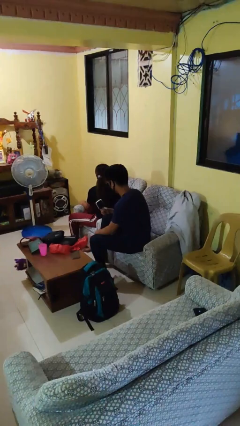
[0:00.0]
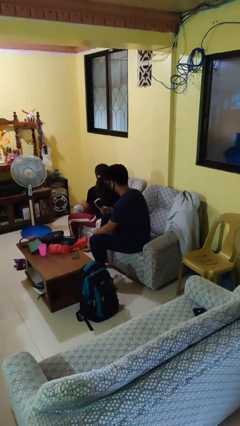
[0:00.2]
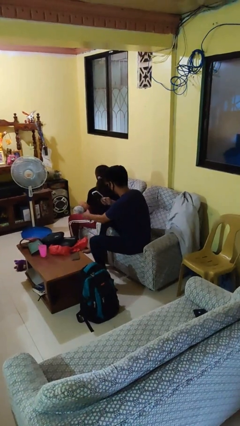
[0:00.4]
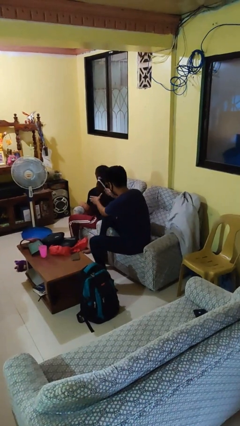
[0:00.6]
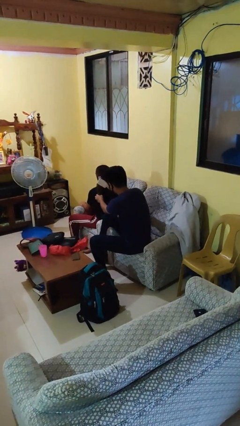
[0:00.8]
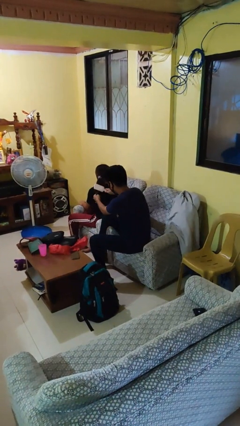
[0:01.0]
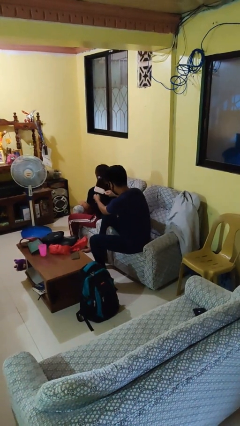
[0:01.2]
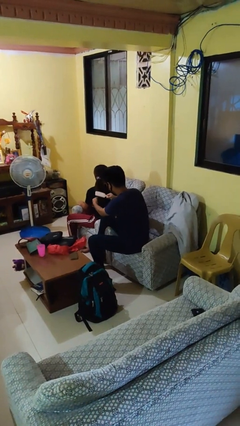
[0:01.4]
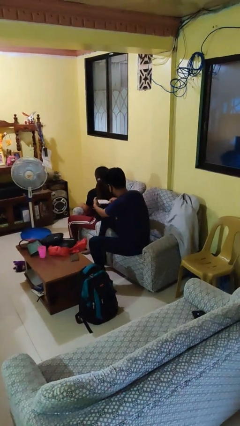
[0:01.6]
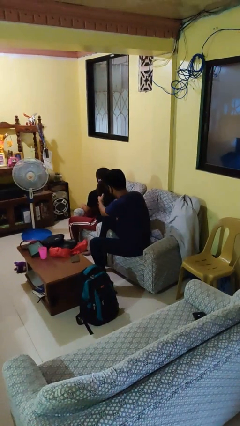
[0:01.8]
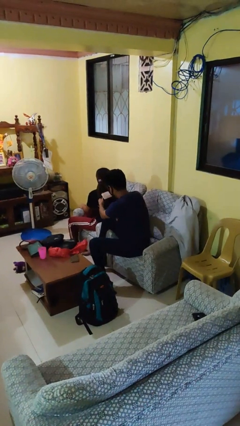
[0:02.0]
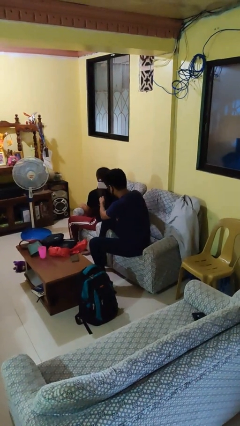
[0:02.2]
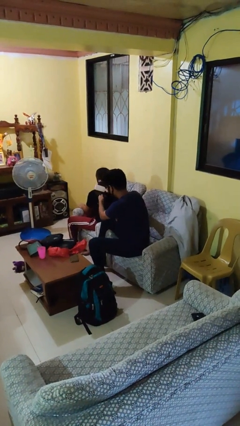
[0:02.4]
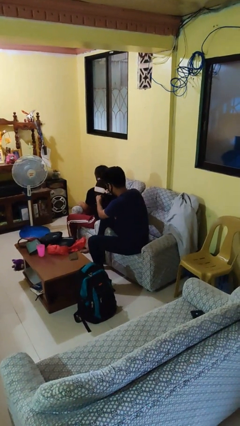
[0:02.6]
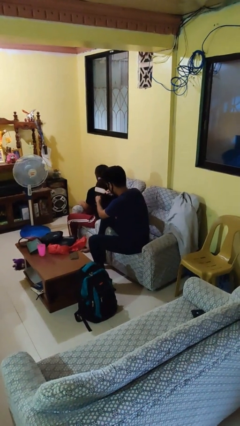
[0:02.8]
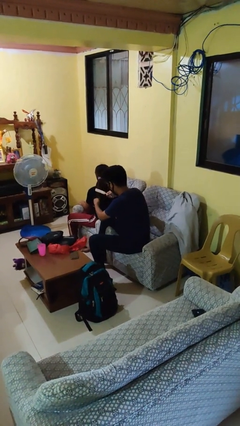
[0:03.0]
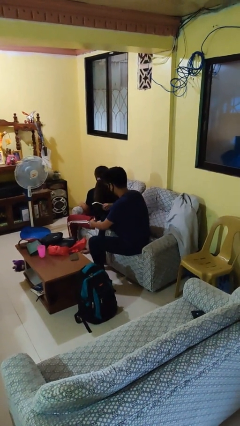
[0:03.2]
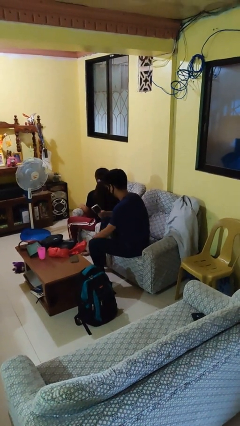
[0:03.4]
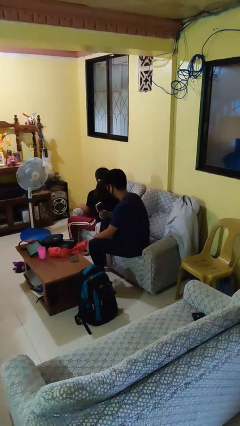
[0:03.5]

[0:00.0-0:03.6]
person brushes hair of person

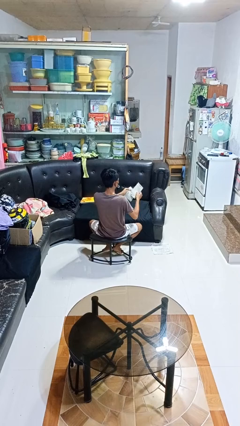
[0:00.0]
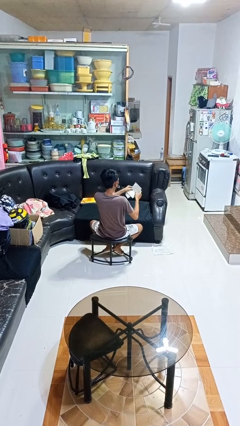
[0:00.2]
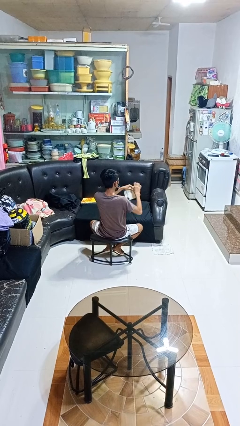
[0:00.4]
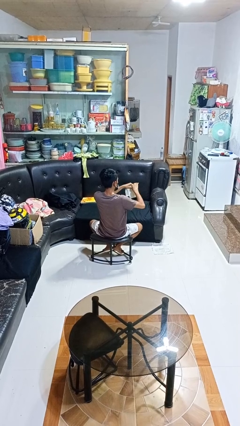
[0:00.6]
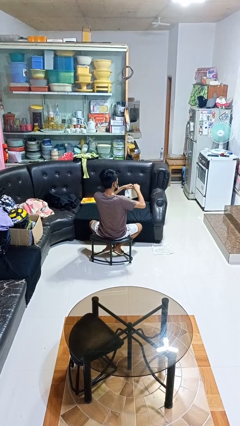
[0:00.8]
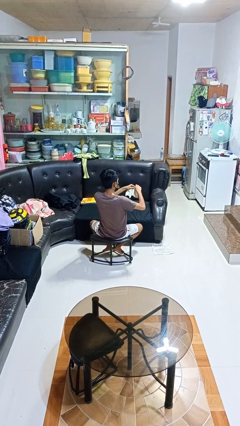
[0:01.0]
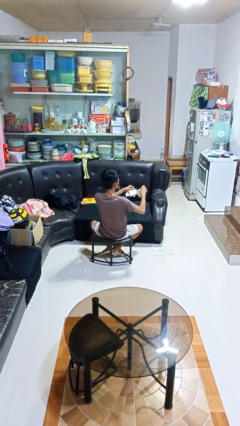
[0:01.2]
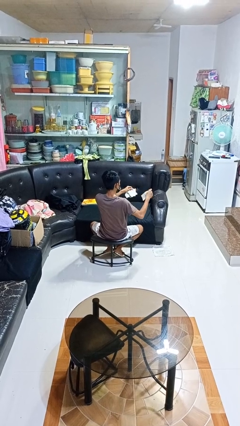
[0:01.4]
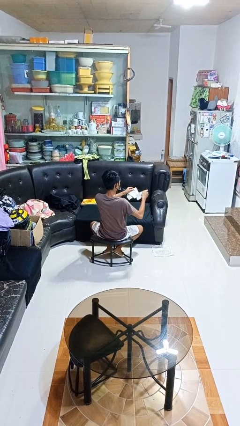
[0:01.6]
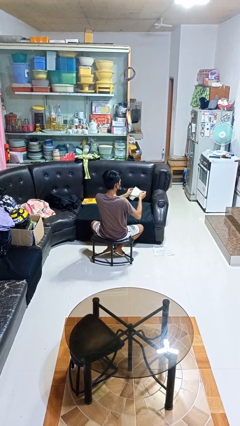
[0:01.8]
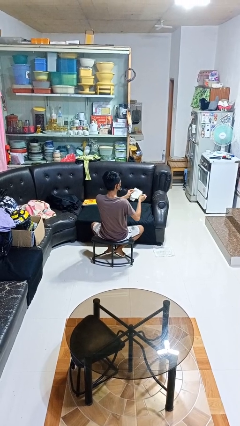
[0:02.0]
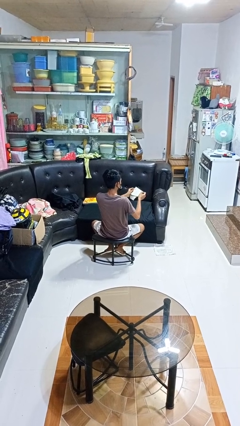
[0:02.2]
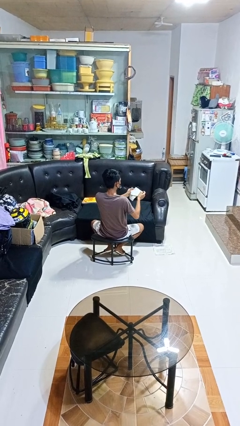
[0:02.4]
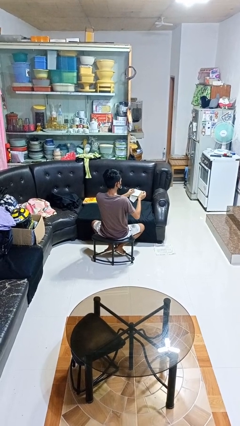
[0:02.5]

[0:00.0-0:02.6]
person tears paper

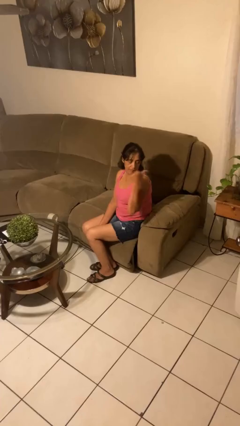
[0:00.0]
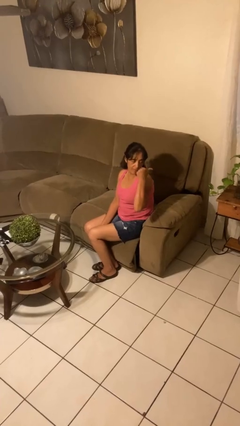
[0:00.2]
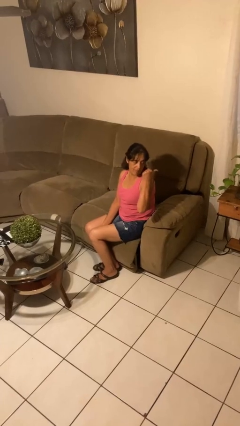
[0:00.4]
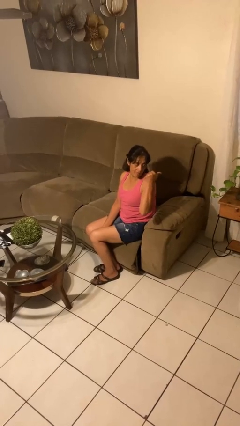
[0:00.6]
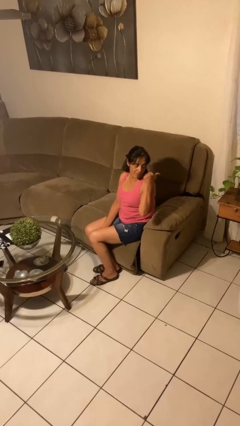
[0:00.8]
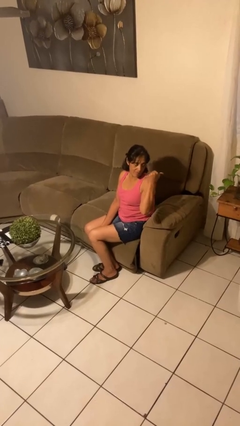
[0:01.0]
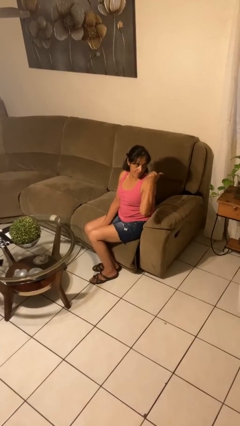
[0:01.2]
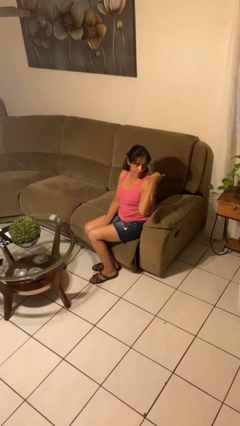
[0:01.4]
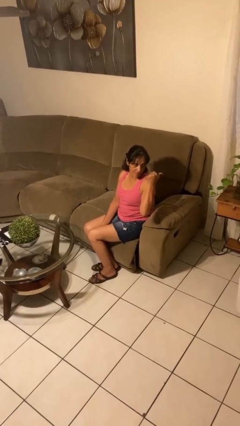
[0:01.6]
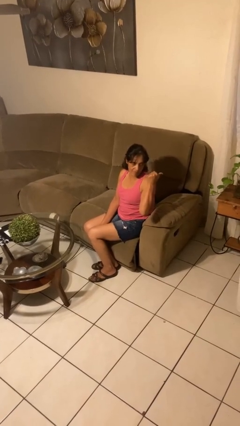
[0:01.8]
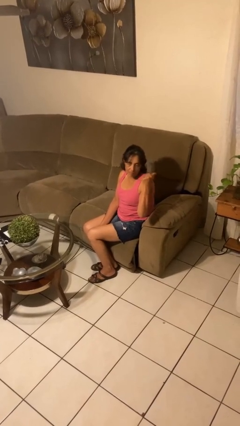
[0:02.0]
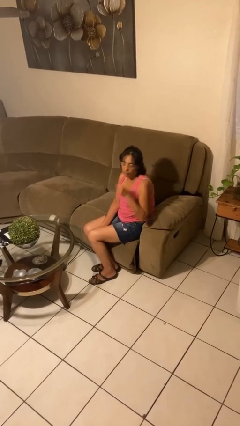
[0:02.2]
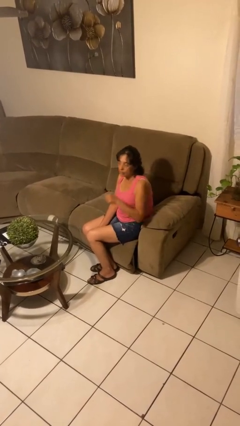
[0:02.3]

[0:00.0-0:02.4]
person gestures behind me

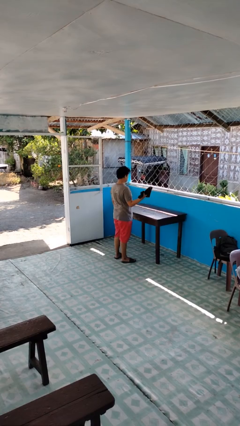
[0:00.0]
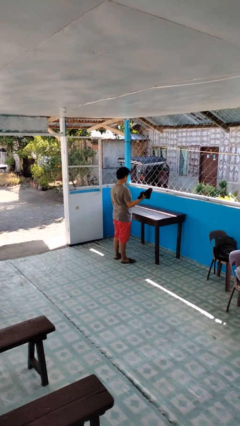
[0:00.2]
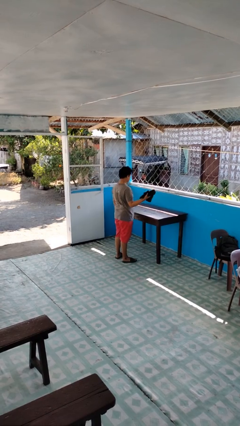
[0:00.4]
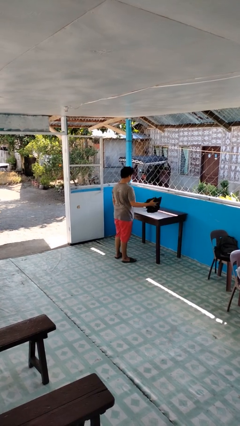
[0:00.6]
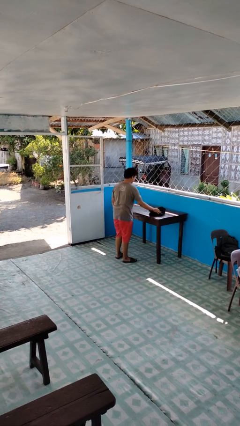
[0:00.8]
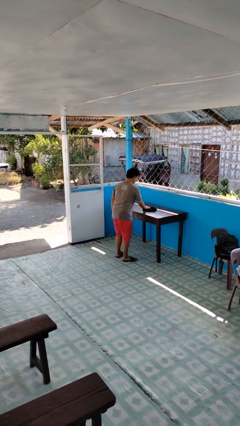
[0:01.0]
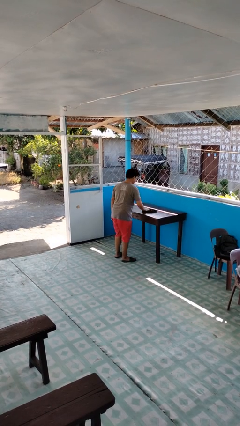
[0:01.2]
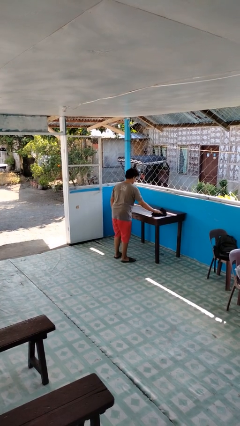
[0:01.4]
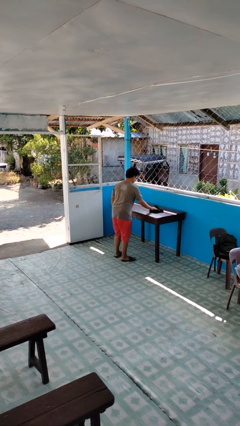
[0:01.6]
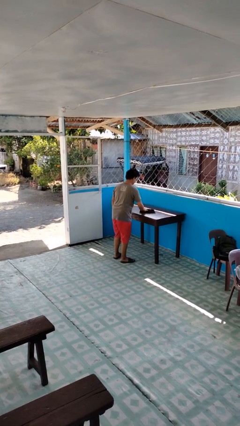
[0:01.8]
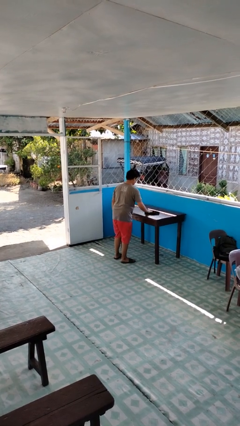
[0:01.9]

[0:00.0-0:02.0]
person cleans table with rag

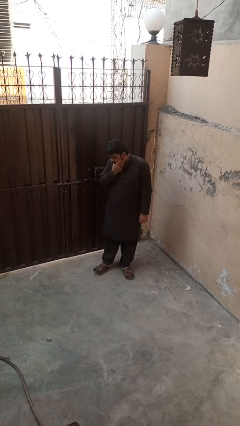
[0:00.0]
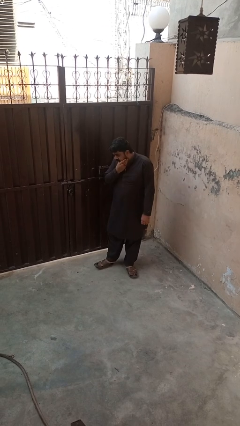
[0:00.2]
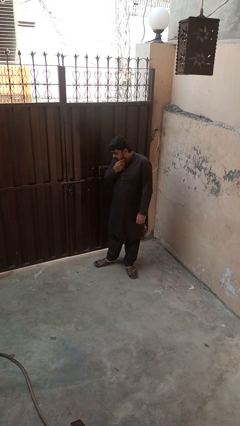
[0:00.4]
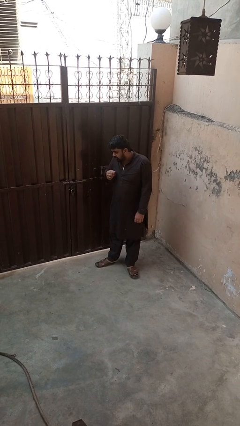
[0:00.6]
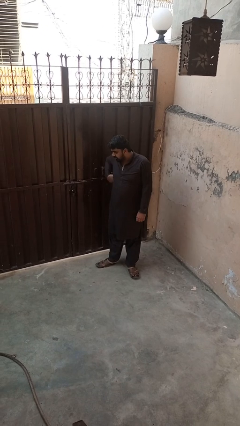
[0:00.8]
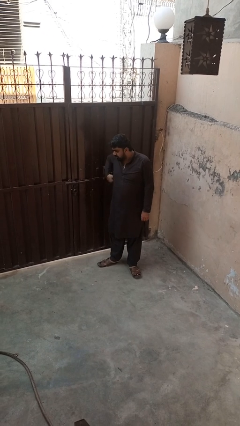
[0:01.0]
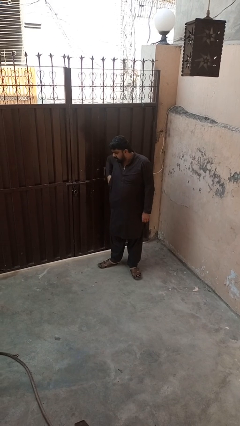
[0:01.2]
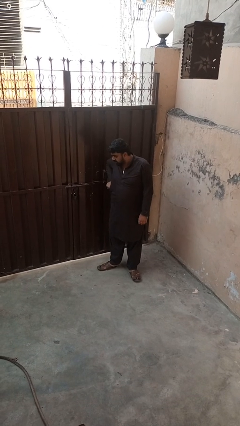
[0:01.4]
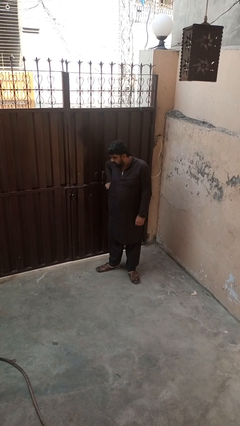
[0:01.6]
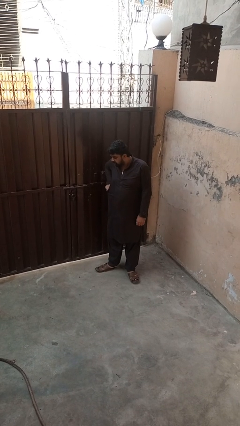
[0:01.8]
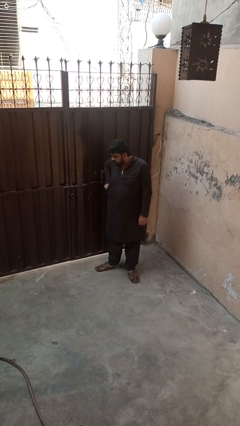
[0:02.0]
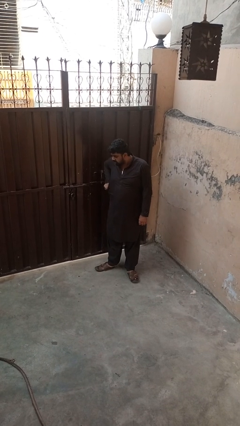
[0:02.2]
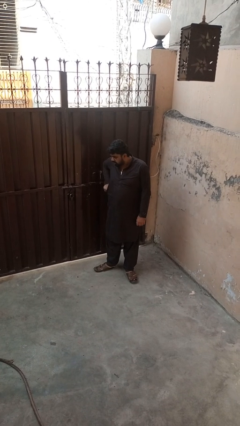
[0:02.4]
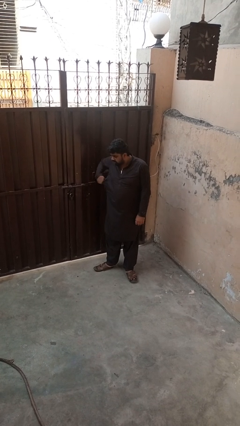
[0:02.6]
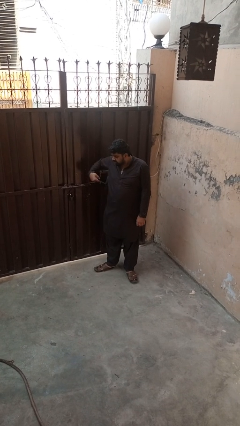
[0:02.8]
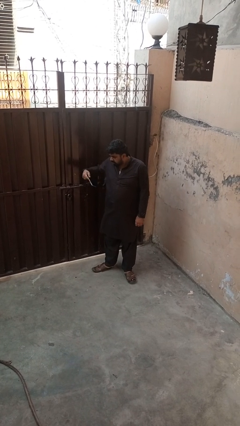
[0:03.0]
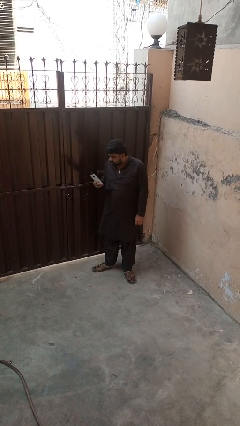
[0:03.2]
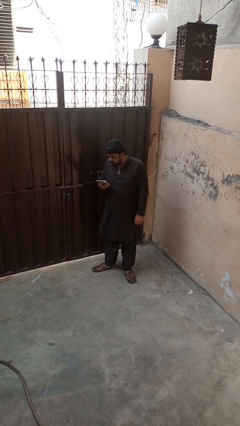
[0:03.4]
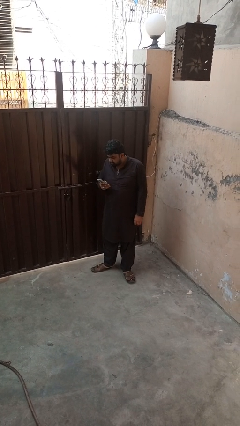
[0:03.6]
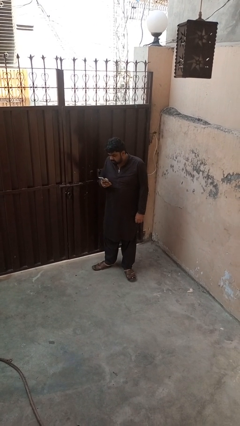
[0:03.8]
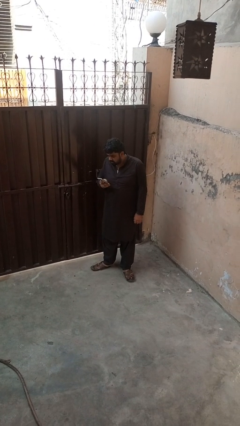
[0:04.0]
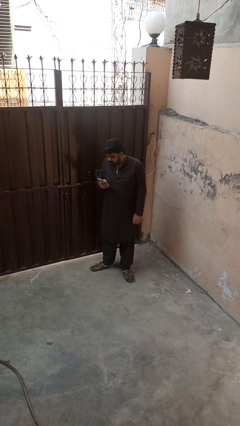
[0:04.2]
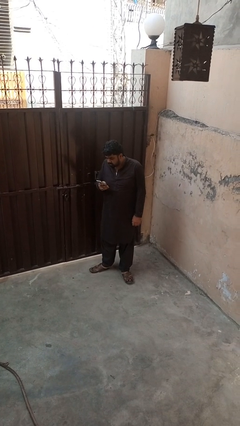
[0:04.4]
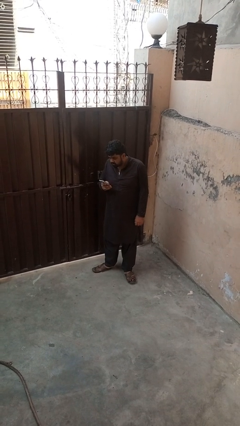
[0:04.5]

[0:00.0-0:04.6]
person takes phone from pocket

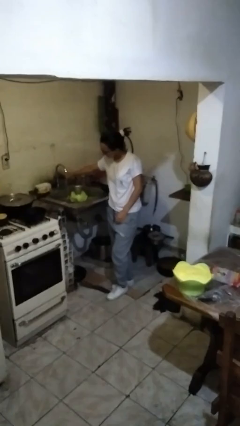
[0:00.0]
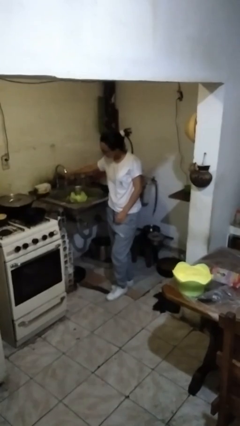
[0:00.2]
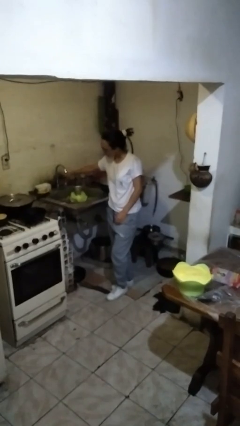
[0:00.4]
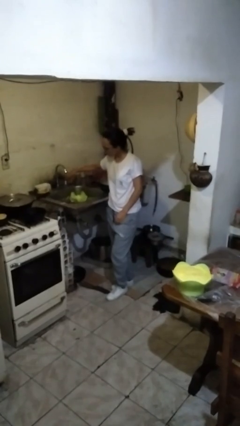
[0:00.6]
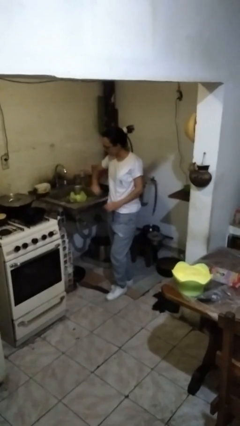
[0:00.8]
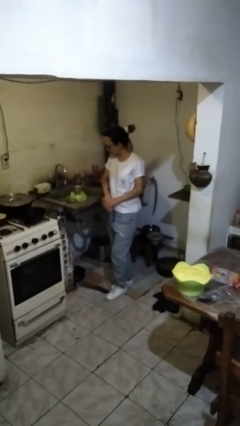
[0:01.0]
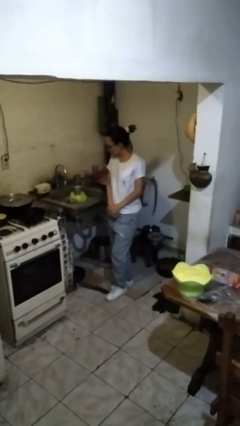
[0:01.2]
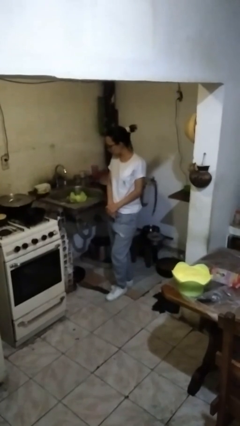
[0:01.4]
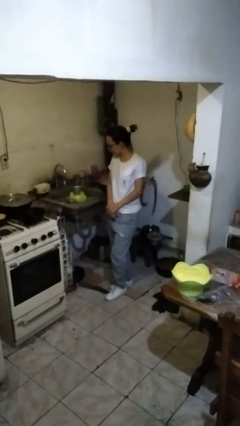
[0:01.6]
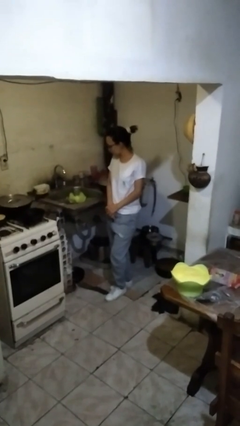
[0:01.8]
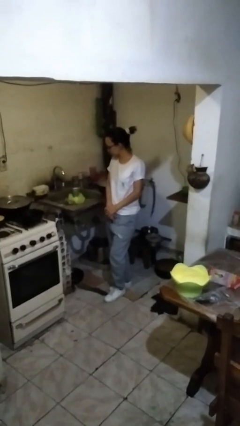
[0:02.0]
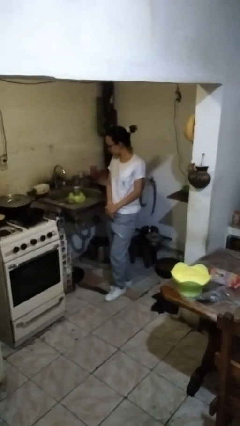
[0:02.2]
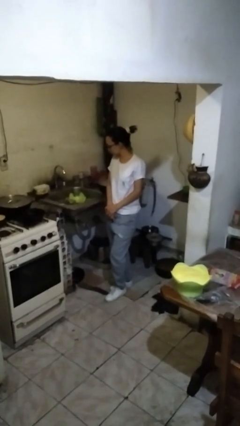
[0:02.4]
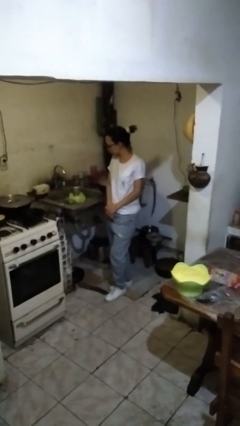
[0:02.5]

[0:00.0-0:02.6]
person turns off faucet
